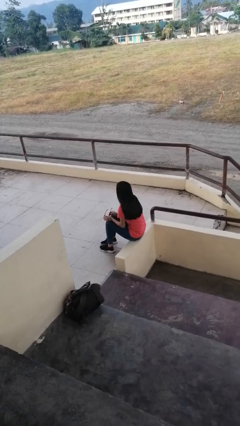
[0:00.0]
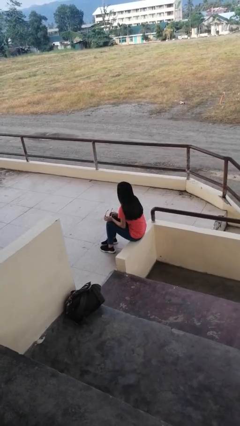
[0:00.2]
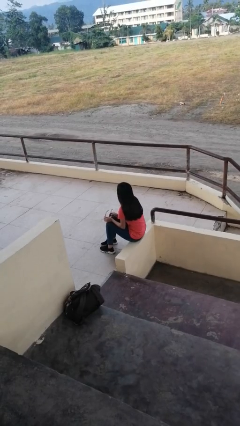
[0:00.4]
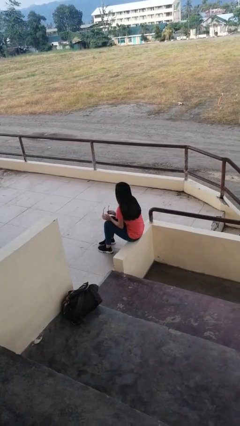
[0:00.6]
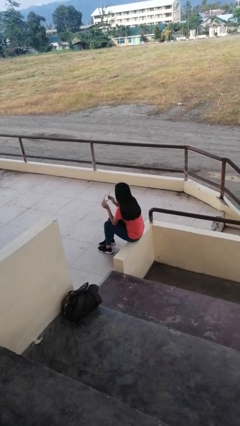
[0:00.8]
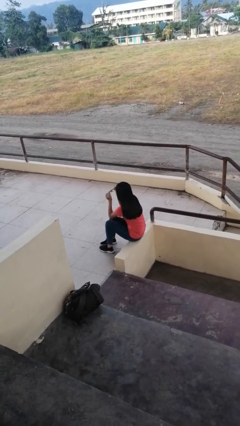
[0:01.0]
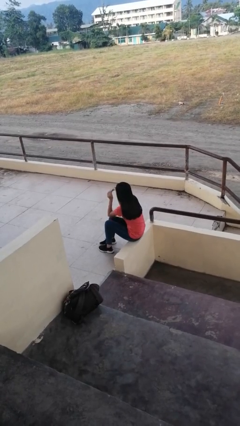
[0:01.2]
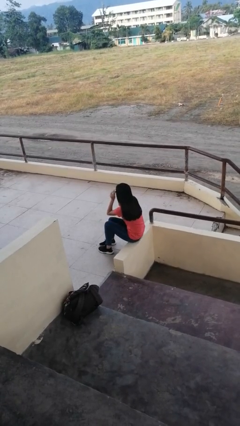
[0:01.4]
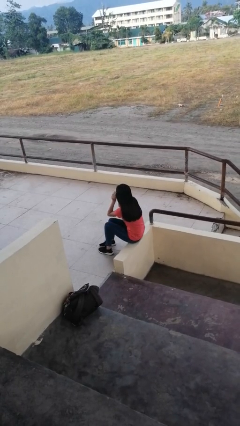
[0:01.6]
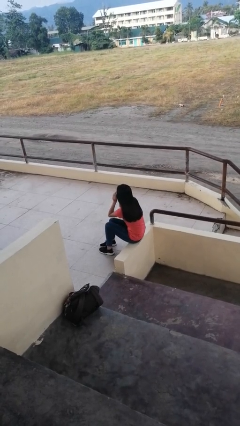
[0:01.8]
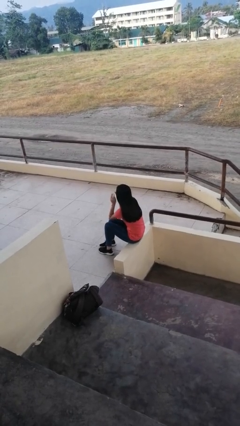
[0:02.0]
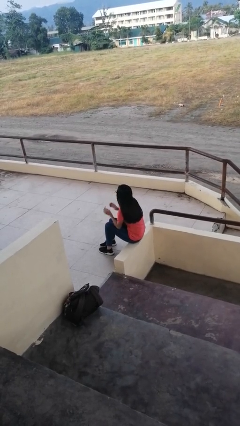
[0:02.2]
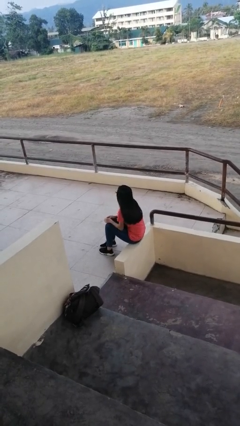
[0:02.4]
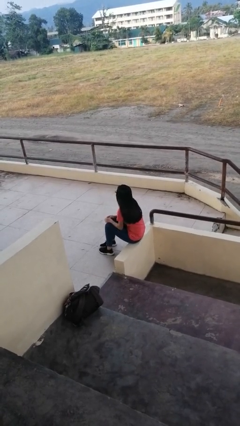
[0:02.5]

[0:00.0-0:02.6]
person puts on glasses

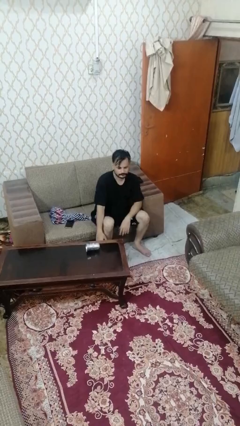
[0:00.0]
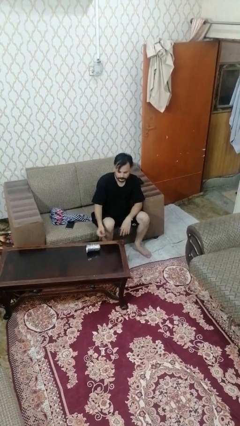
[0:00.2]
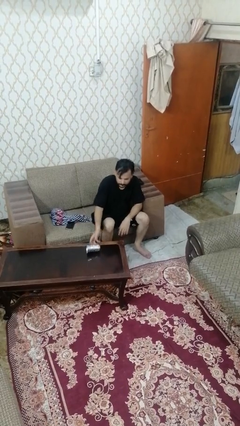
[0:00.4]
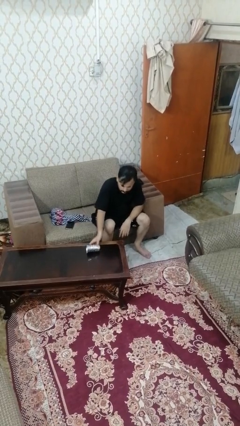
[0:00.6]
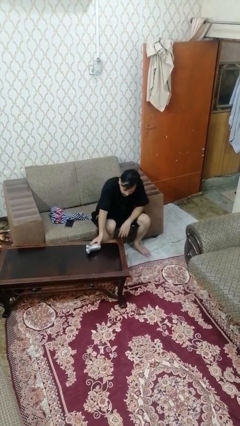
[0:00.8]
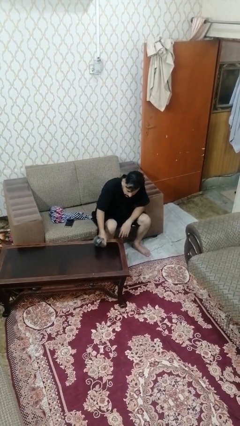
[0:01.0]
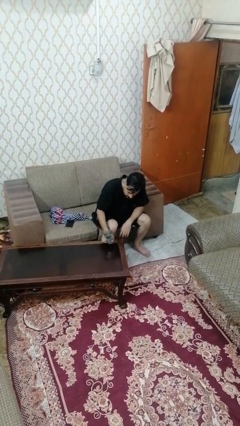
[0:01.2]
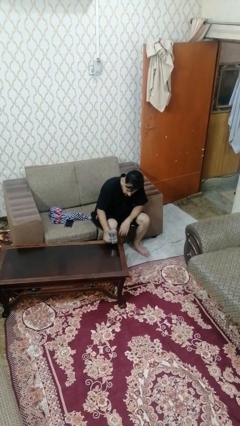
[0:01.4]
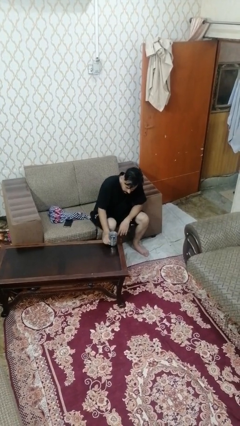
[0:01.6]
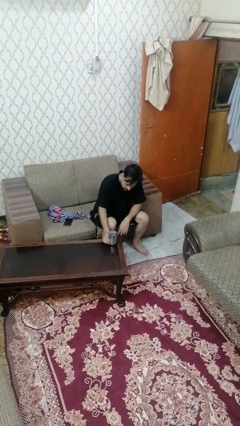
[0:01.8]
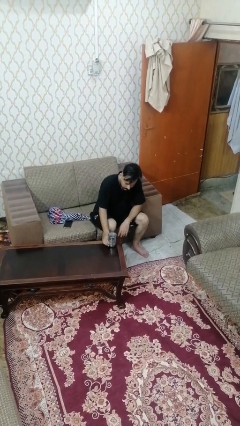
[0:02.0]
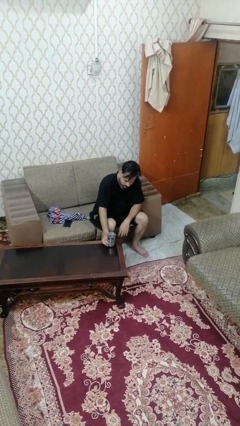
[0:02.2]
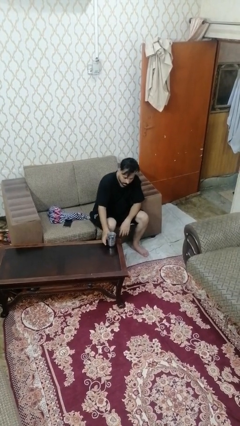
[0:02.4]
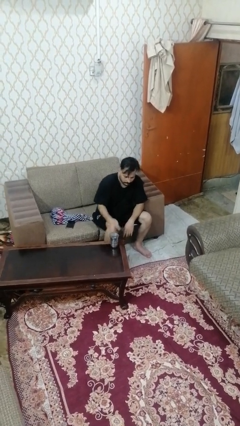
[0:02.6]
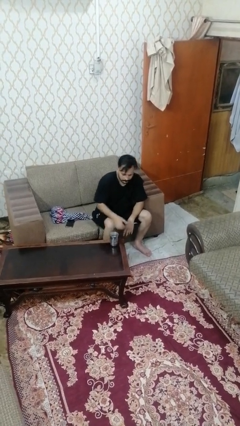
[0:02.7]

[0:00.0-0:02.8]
person sets upright glass

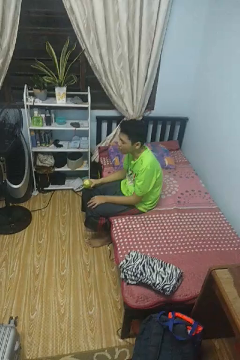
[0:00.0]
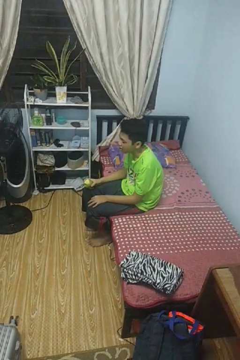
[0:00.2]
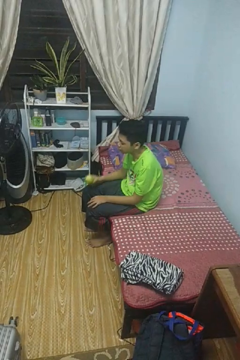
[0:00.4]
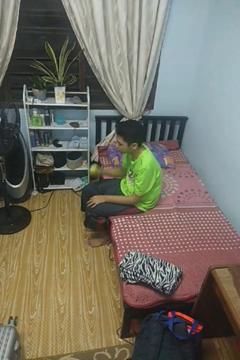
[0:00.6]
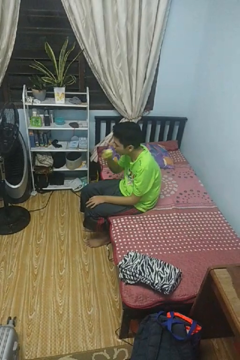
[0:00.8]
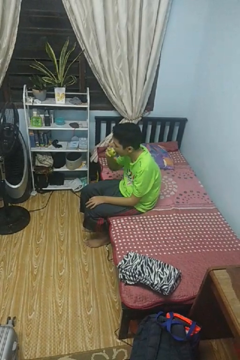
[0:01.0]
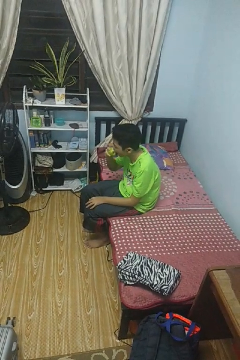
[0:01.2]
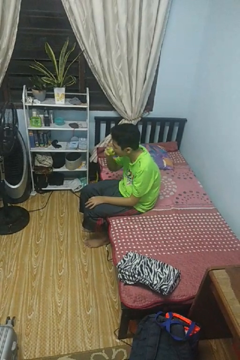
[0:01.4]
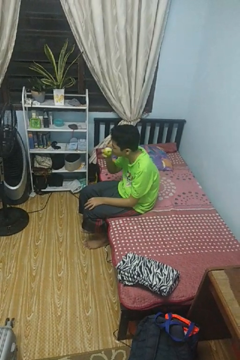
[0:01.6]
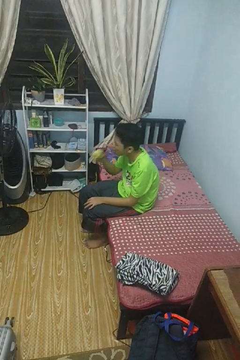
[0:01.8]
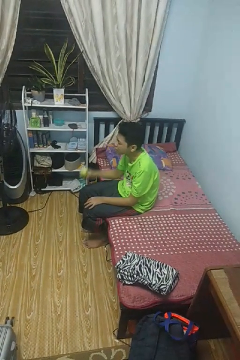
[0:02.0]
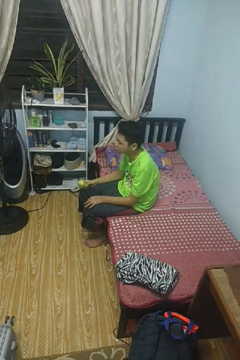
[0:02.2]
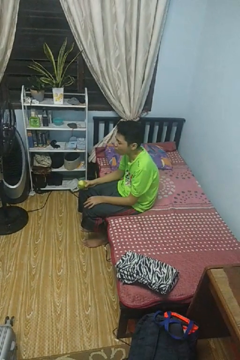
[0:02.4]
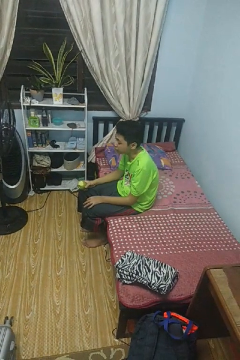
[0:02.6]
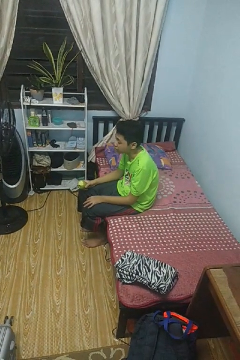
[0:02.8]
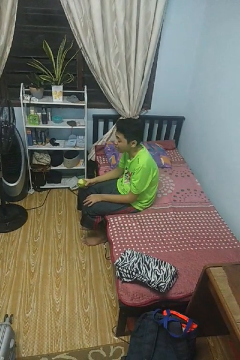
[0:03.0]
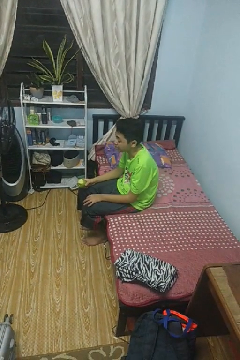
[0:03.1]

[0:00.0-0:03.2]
person eats apple

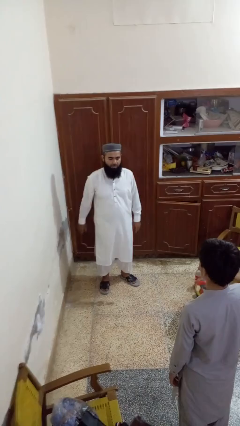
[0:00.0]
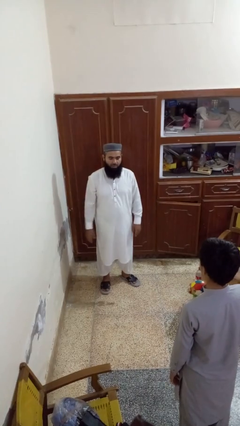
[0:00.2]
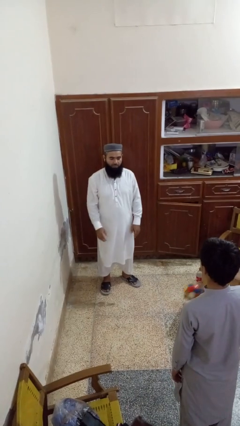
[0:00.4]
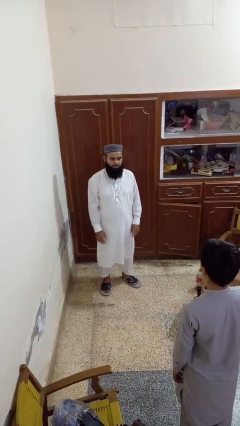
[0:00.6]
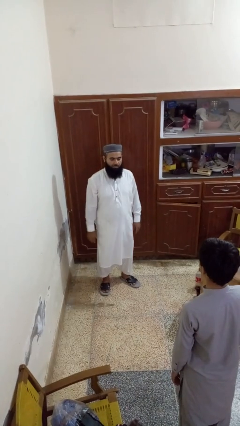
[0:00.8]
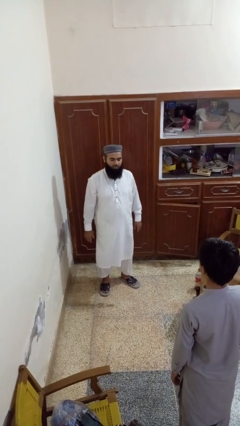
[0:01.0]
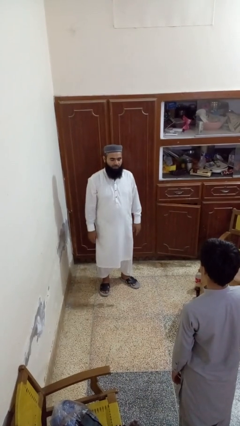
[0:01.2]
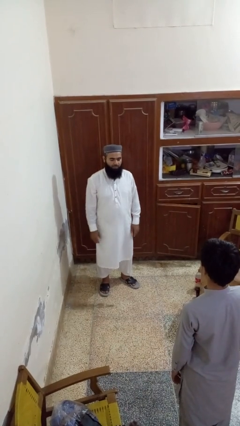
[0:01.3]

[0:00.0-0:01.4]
person throws object to person

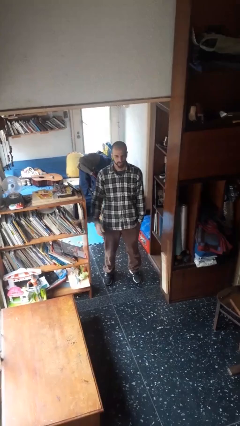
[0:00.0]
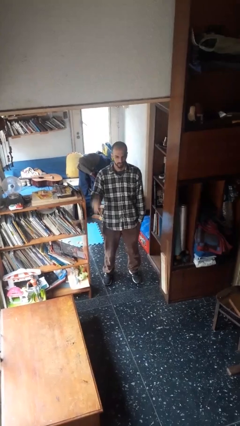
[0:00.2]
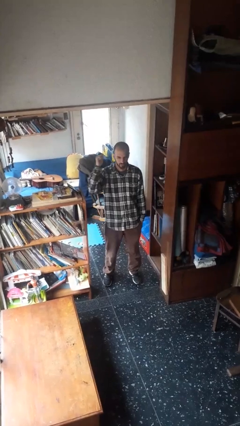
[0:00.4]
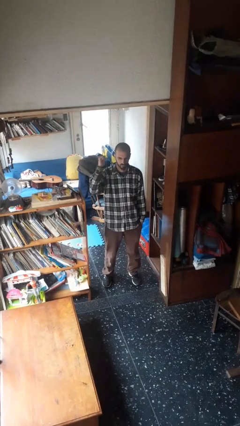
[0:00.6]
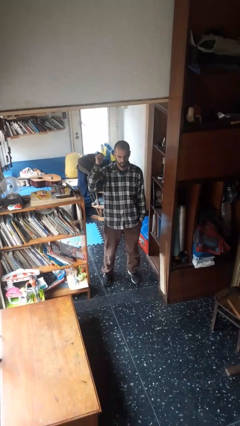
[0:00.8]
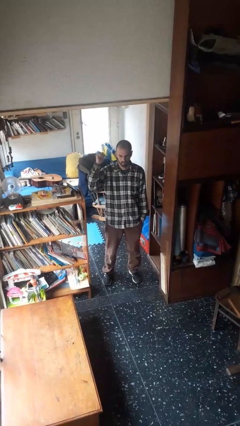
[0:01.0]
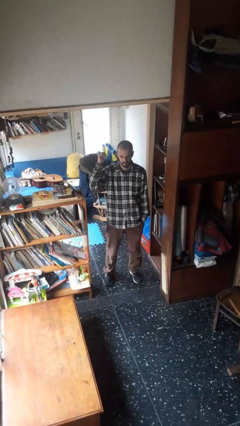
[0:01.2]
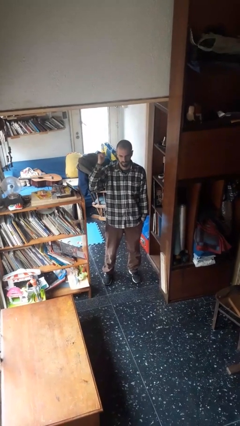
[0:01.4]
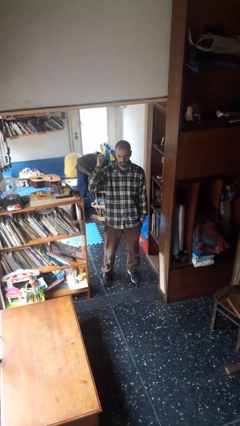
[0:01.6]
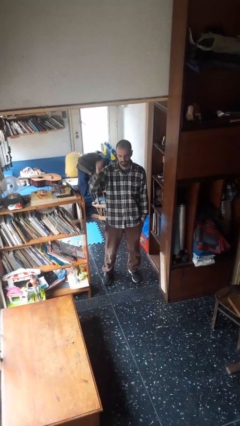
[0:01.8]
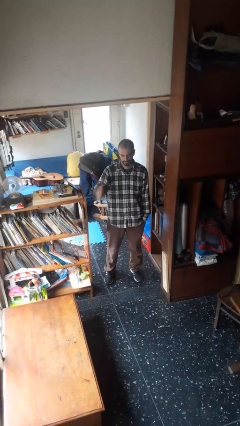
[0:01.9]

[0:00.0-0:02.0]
person gestures behind me

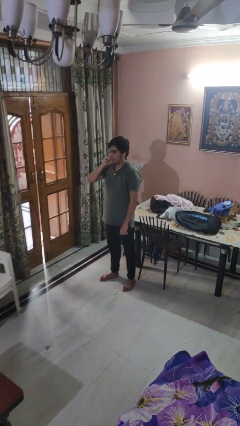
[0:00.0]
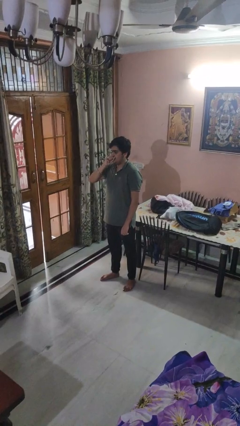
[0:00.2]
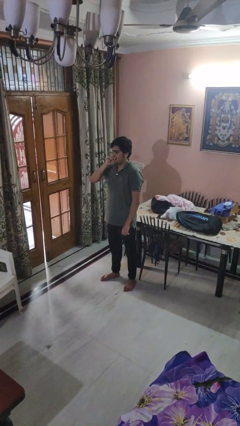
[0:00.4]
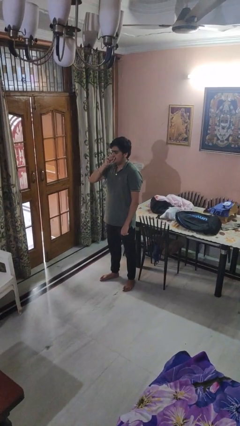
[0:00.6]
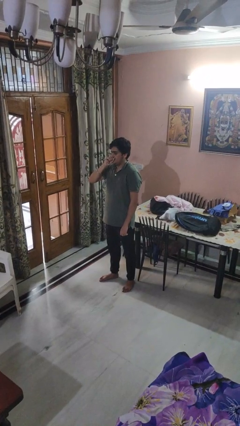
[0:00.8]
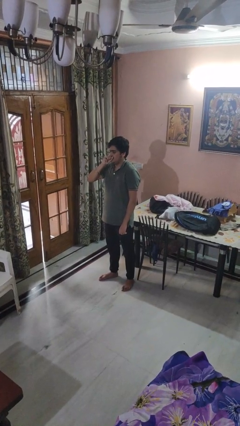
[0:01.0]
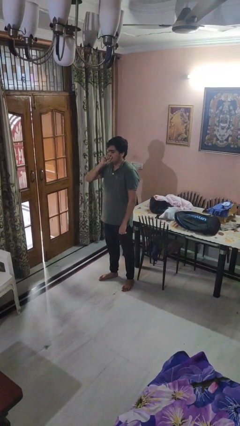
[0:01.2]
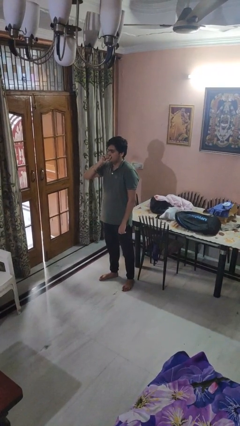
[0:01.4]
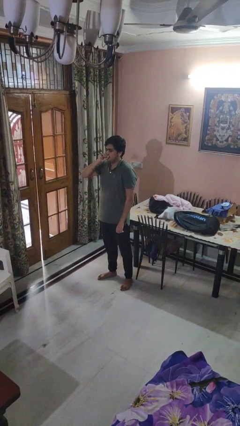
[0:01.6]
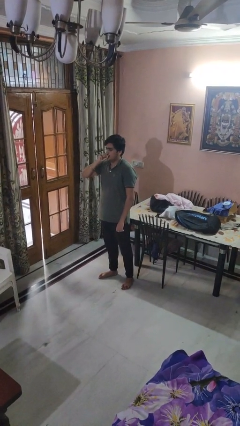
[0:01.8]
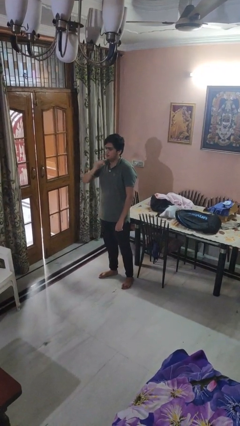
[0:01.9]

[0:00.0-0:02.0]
person vapes

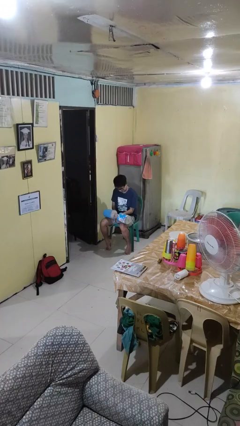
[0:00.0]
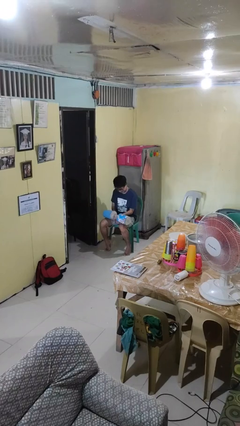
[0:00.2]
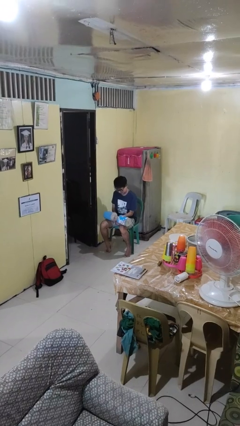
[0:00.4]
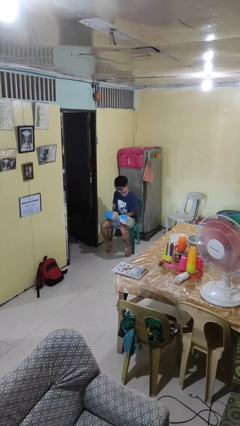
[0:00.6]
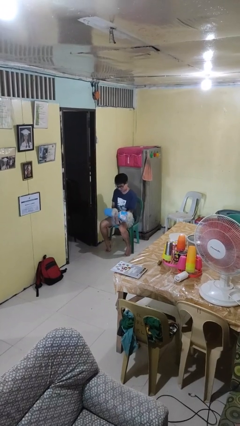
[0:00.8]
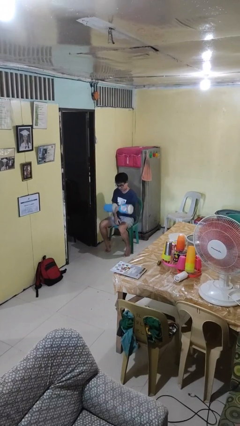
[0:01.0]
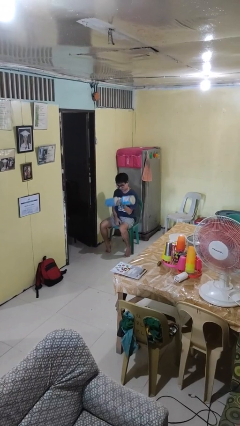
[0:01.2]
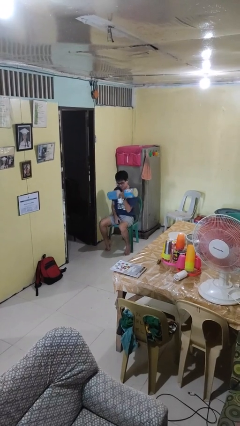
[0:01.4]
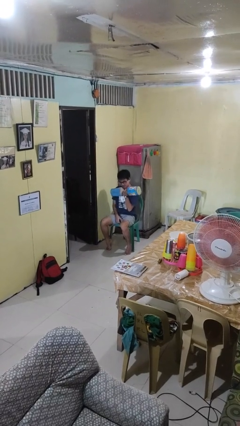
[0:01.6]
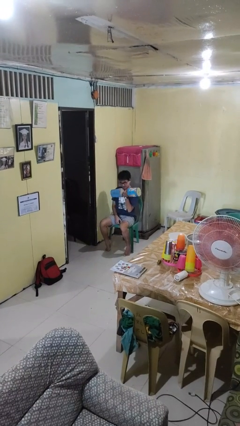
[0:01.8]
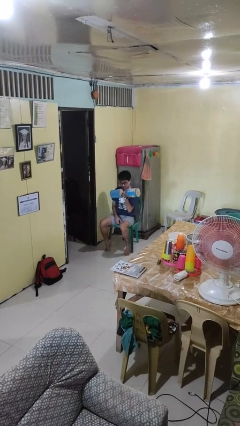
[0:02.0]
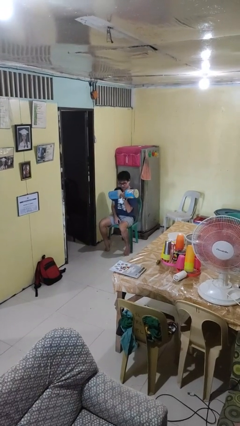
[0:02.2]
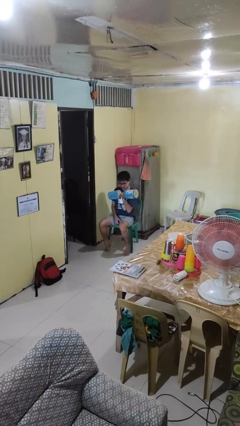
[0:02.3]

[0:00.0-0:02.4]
person lifts dumbbells

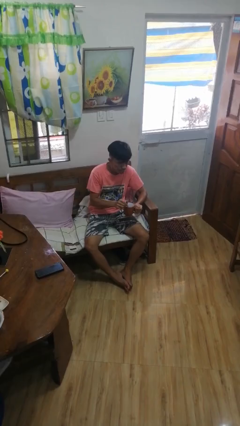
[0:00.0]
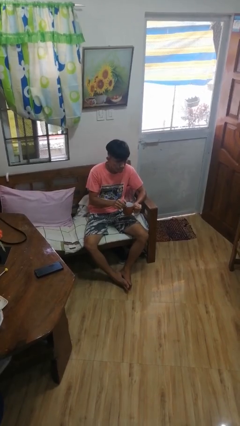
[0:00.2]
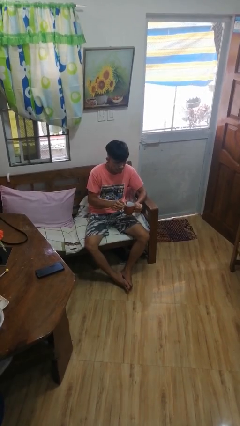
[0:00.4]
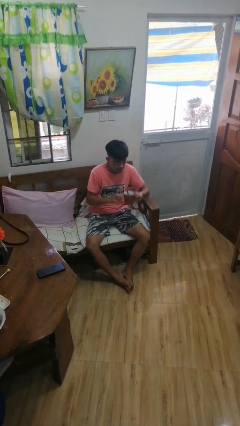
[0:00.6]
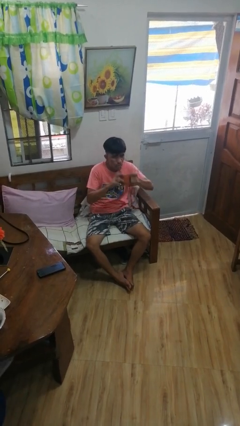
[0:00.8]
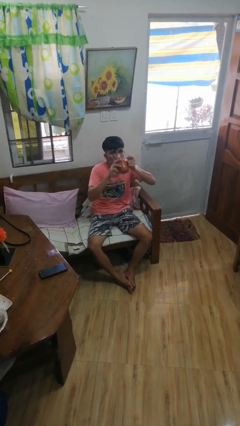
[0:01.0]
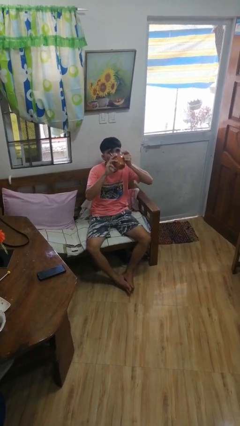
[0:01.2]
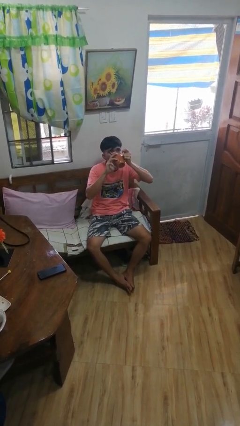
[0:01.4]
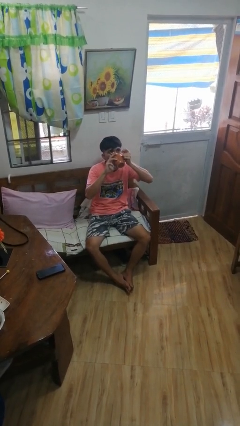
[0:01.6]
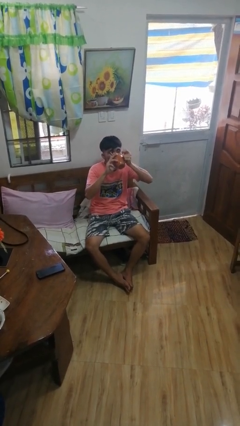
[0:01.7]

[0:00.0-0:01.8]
person drinks from mug
